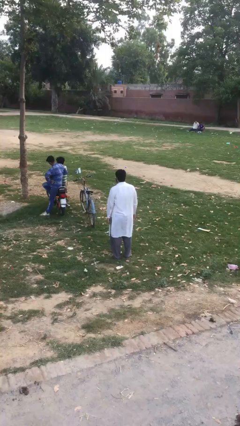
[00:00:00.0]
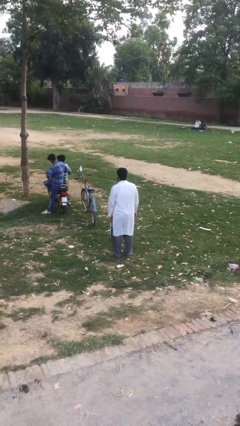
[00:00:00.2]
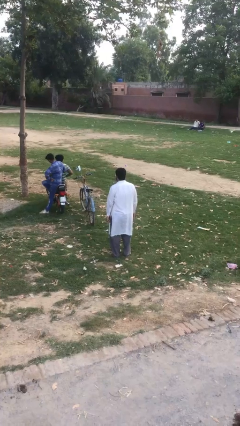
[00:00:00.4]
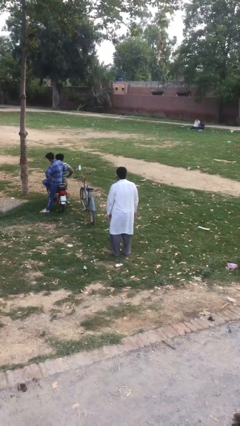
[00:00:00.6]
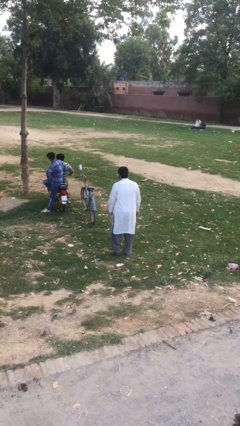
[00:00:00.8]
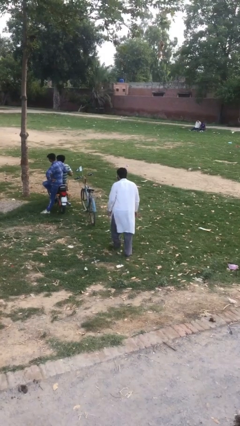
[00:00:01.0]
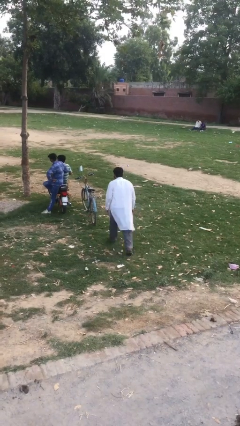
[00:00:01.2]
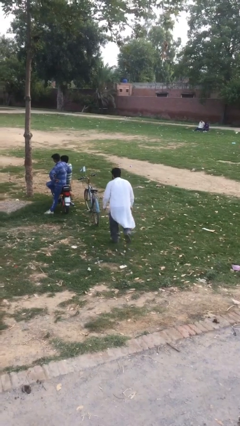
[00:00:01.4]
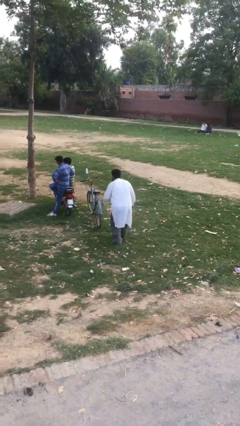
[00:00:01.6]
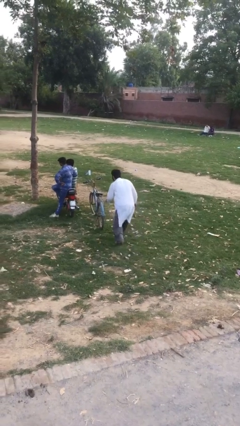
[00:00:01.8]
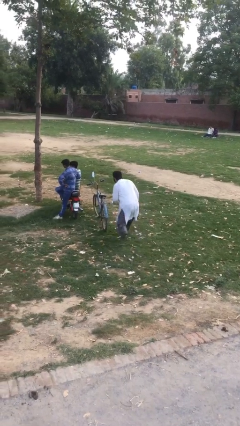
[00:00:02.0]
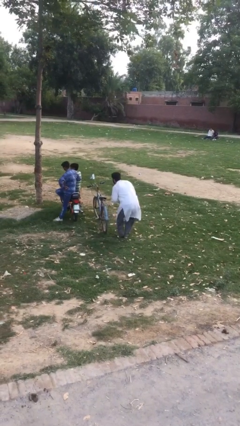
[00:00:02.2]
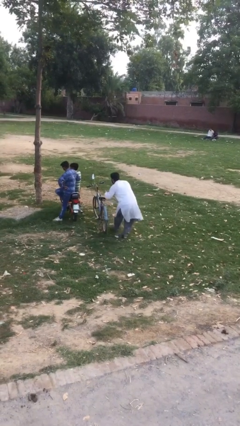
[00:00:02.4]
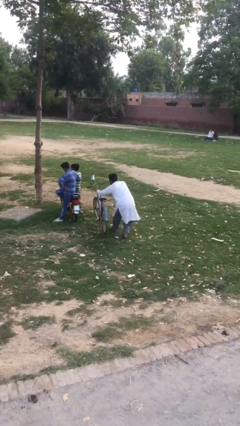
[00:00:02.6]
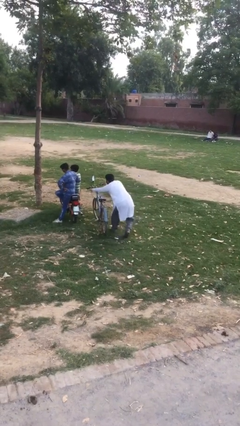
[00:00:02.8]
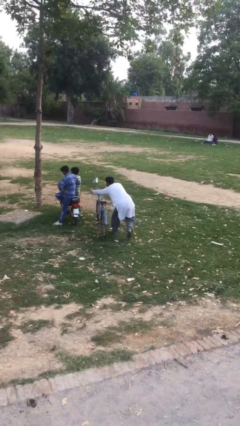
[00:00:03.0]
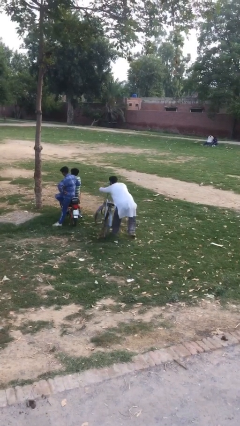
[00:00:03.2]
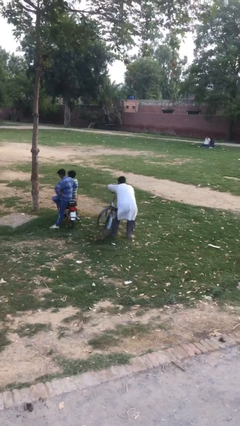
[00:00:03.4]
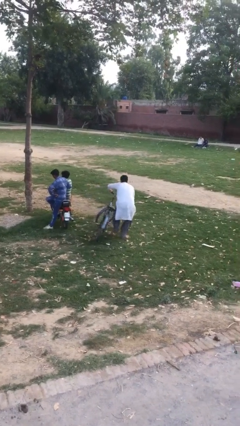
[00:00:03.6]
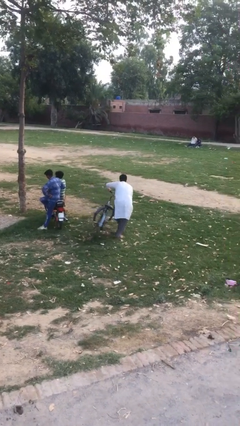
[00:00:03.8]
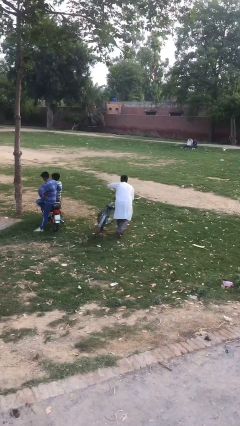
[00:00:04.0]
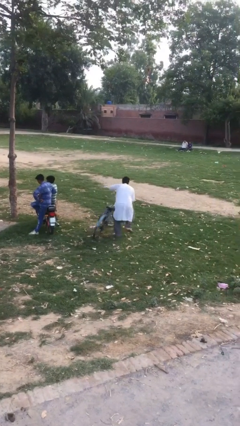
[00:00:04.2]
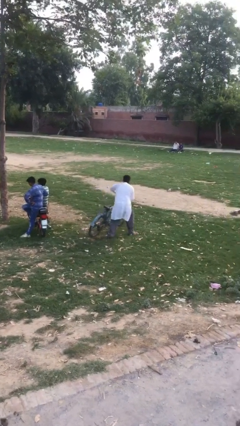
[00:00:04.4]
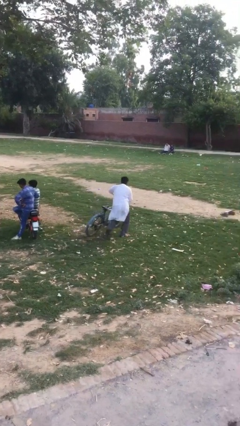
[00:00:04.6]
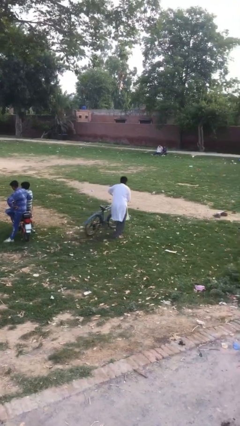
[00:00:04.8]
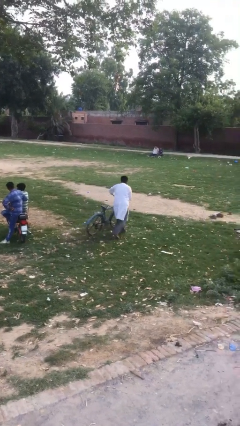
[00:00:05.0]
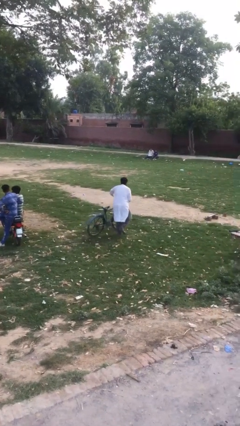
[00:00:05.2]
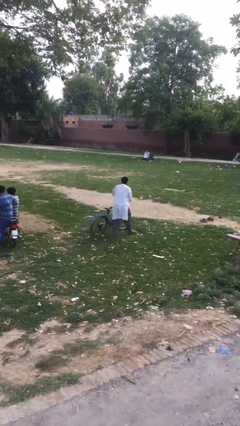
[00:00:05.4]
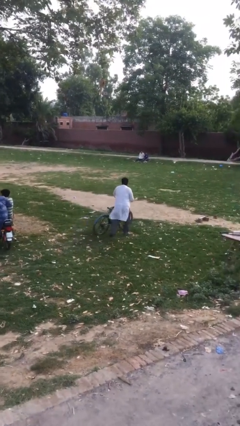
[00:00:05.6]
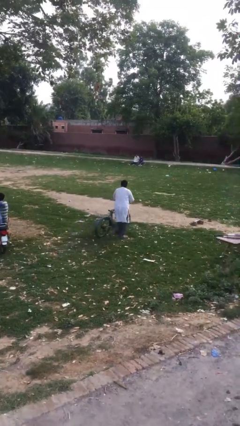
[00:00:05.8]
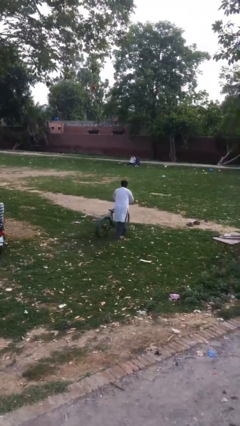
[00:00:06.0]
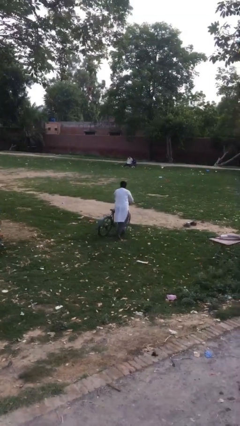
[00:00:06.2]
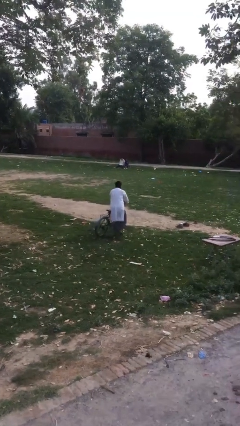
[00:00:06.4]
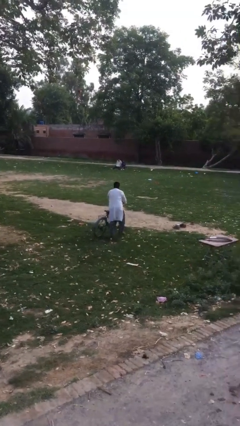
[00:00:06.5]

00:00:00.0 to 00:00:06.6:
person steals object from person

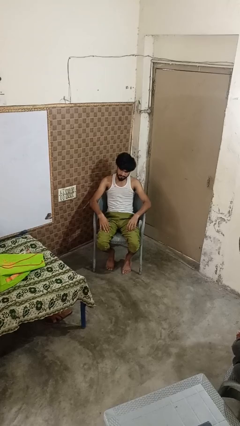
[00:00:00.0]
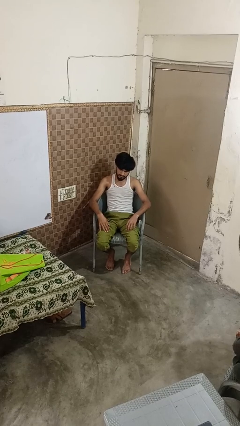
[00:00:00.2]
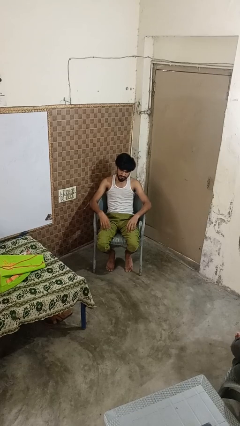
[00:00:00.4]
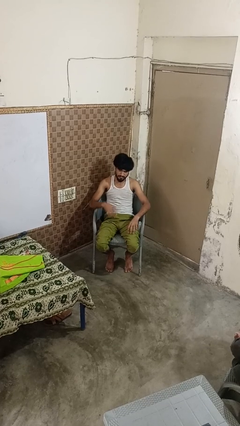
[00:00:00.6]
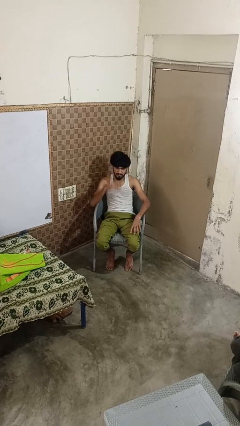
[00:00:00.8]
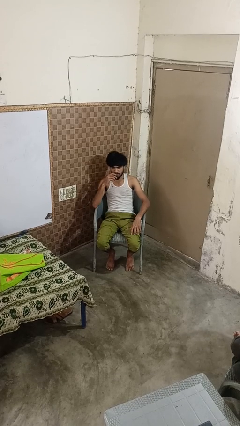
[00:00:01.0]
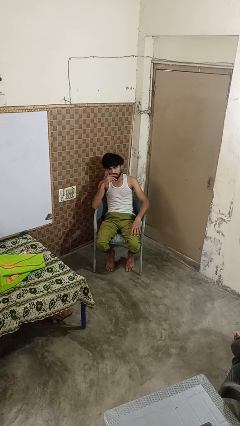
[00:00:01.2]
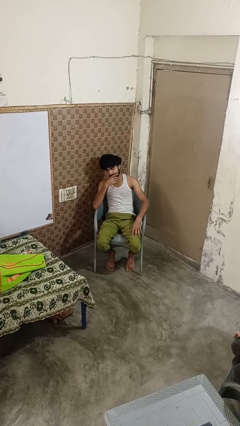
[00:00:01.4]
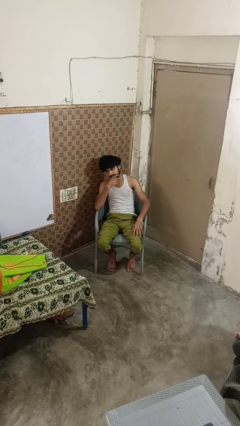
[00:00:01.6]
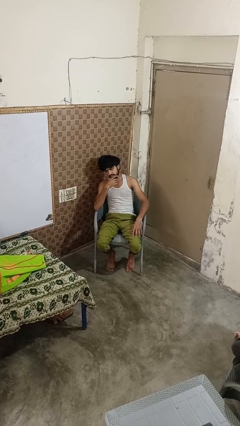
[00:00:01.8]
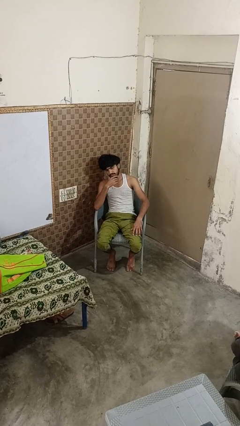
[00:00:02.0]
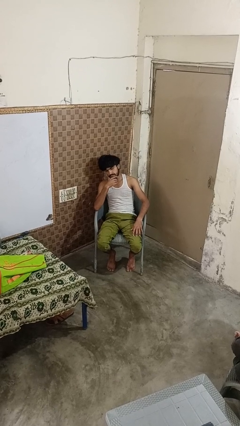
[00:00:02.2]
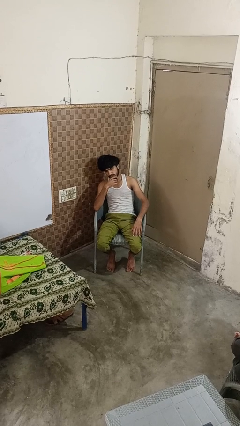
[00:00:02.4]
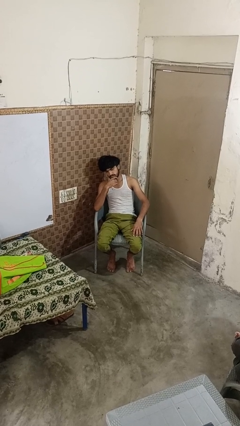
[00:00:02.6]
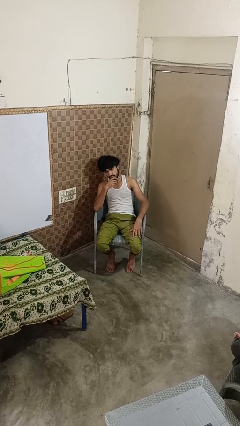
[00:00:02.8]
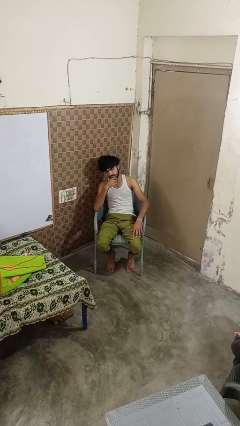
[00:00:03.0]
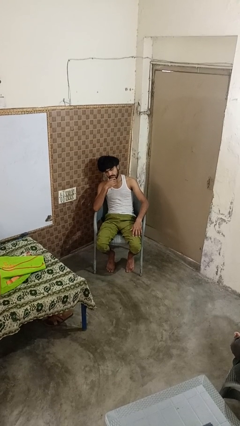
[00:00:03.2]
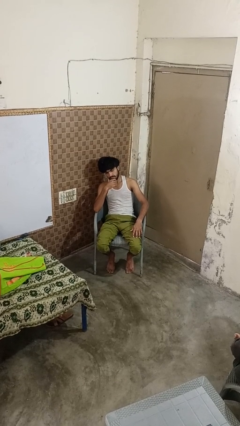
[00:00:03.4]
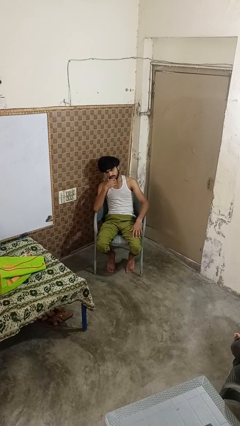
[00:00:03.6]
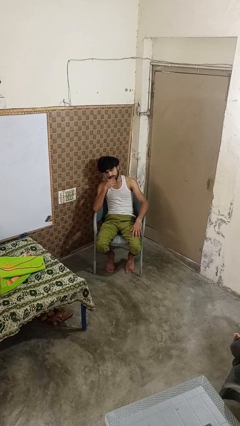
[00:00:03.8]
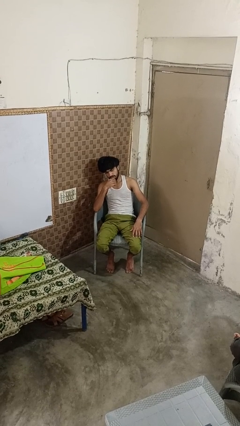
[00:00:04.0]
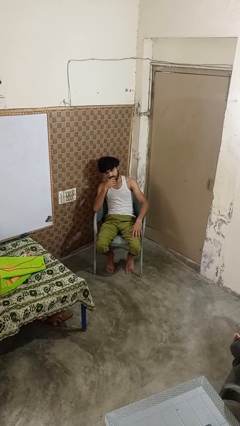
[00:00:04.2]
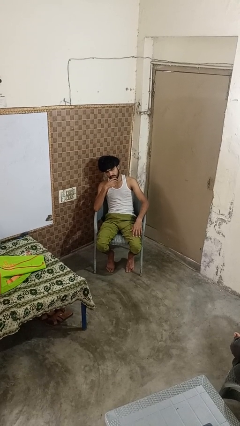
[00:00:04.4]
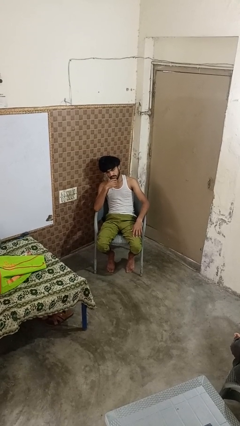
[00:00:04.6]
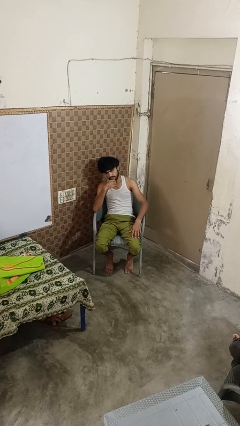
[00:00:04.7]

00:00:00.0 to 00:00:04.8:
person strokes chin

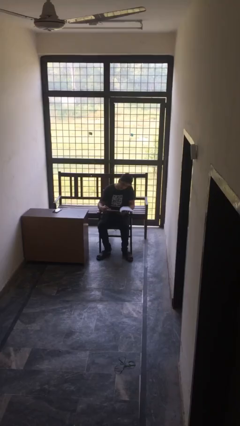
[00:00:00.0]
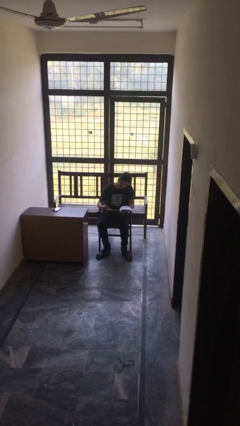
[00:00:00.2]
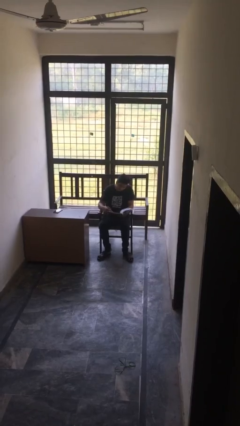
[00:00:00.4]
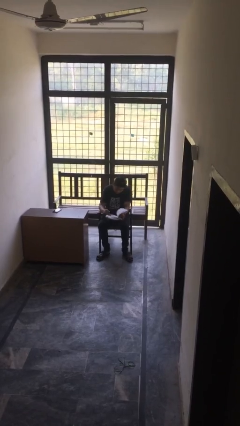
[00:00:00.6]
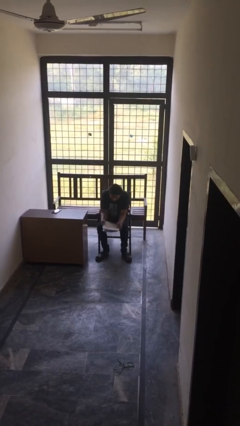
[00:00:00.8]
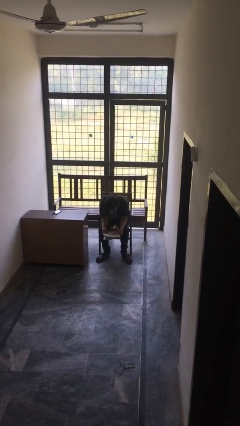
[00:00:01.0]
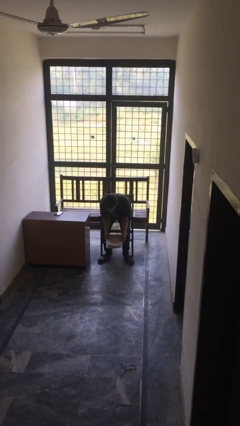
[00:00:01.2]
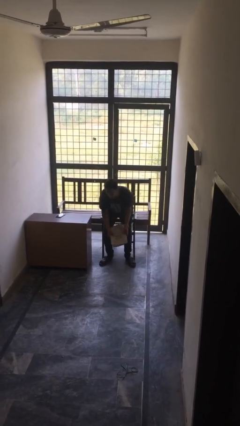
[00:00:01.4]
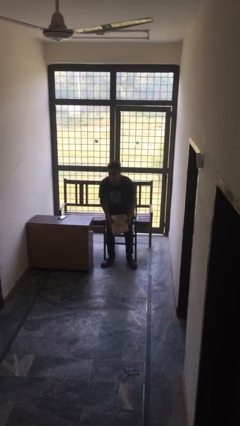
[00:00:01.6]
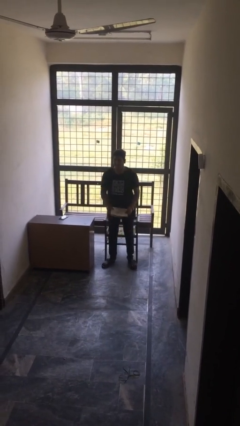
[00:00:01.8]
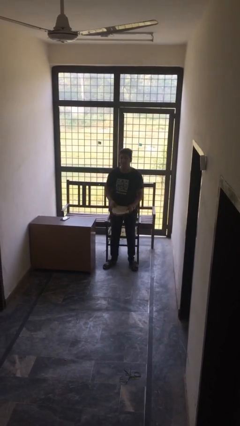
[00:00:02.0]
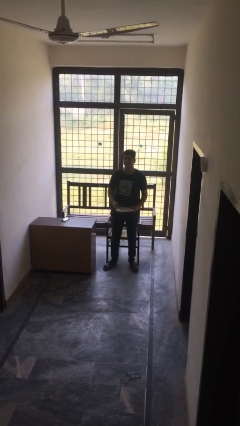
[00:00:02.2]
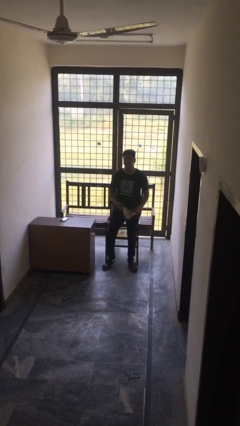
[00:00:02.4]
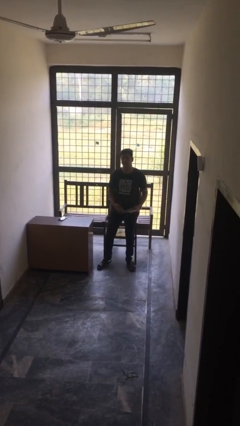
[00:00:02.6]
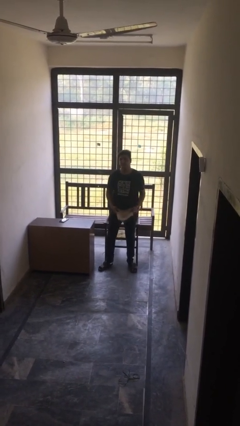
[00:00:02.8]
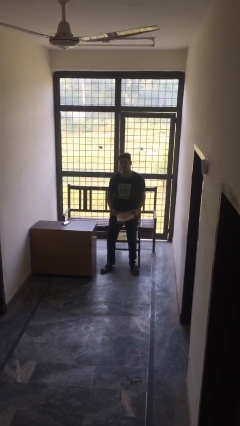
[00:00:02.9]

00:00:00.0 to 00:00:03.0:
person stands up

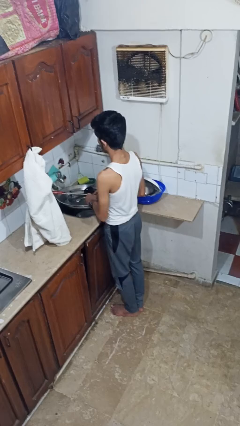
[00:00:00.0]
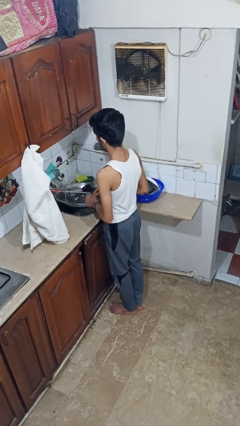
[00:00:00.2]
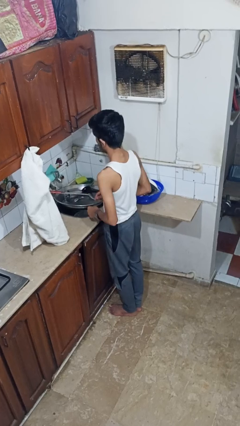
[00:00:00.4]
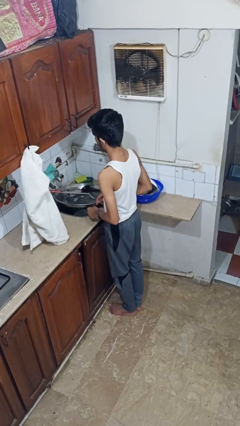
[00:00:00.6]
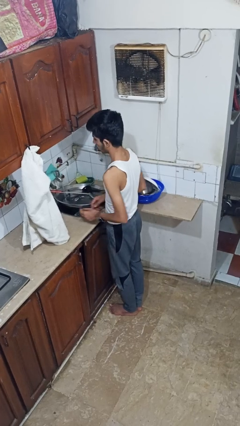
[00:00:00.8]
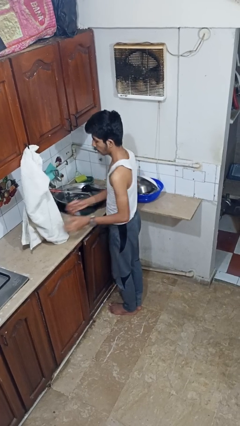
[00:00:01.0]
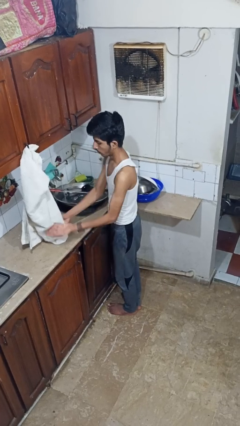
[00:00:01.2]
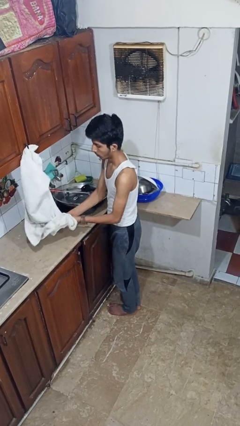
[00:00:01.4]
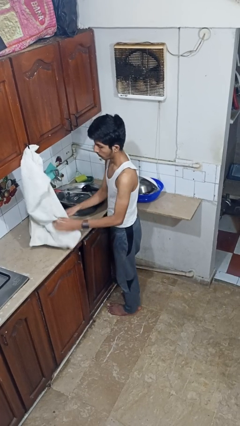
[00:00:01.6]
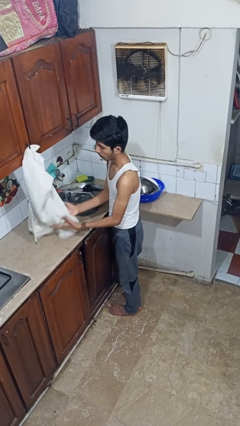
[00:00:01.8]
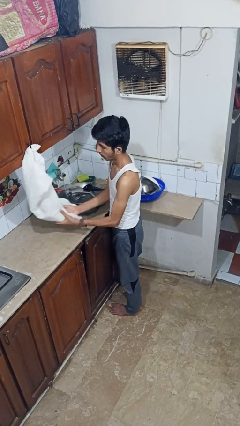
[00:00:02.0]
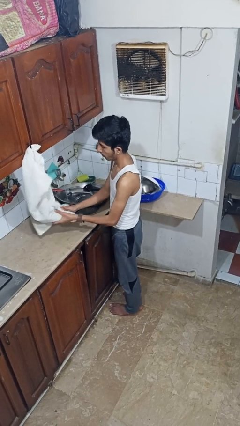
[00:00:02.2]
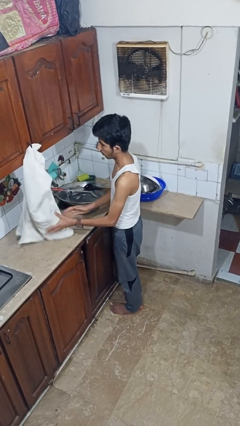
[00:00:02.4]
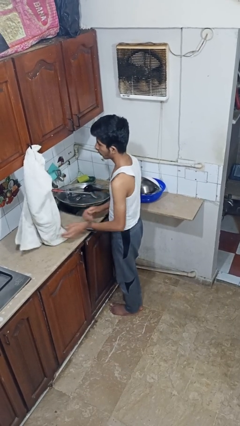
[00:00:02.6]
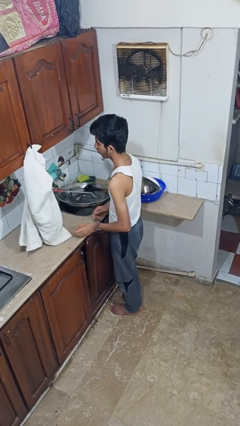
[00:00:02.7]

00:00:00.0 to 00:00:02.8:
person dries hands with towel

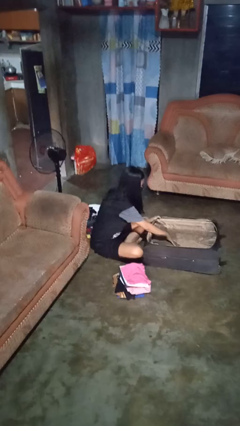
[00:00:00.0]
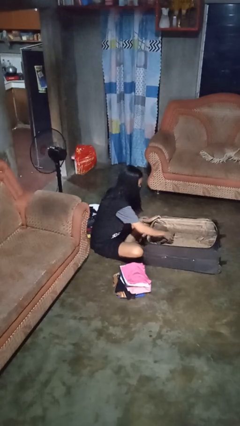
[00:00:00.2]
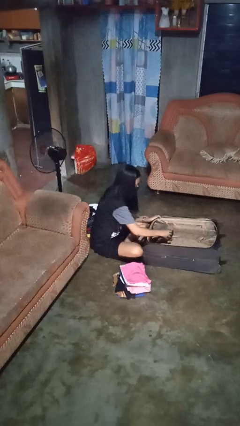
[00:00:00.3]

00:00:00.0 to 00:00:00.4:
person unloads clothes from suitcase

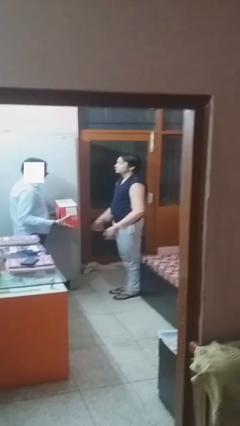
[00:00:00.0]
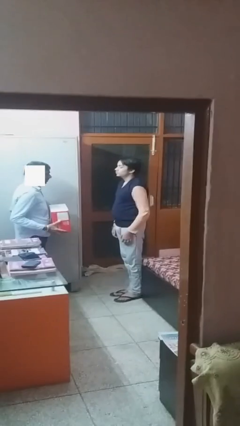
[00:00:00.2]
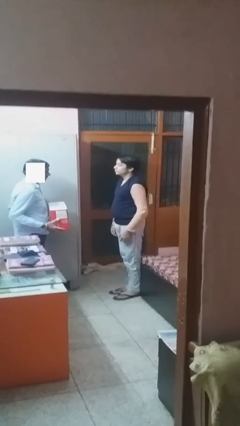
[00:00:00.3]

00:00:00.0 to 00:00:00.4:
person transfers object to person
